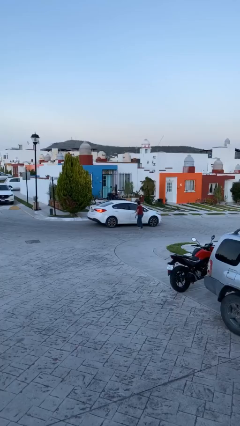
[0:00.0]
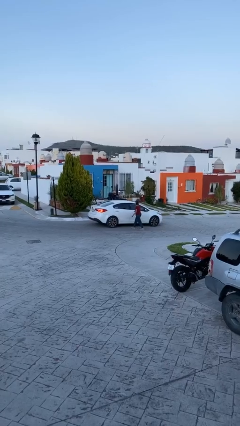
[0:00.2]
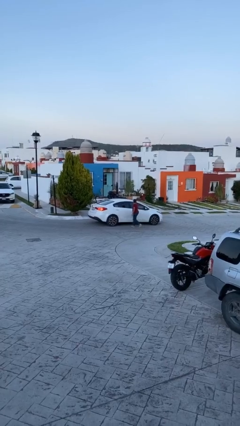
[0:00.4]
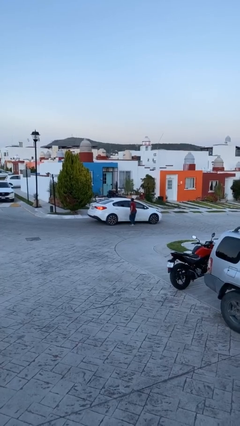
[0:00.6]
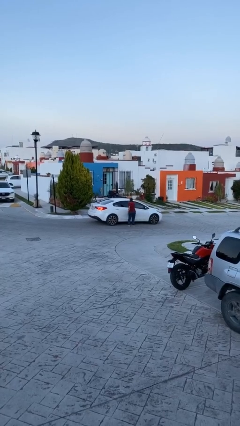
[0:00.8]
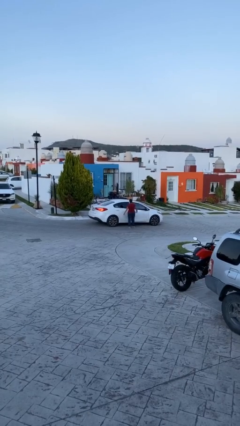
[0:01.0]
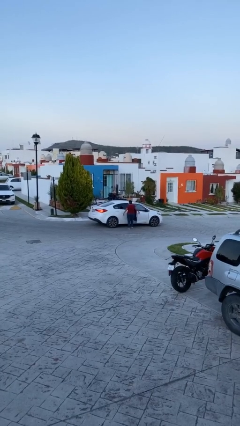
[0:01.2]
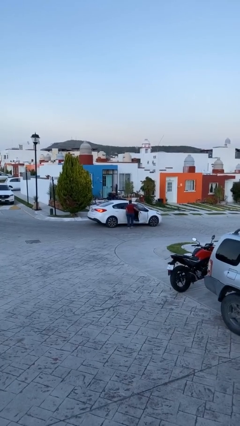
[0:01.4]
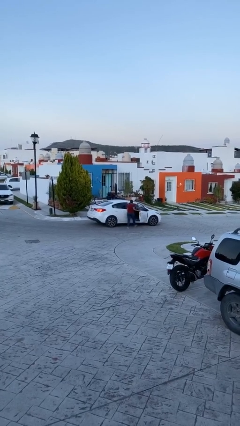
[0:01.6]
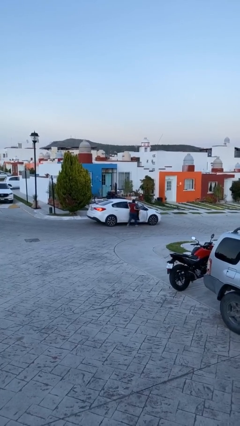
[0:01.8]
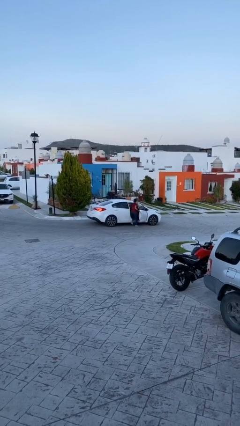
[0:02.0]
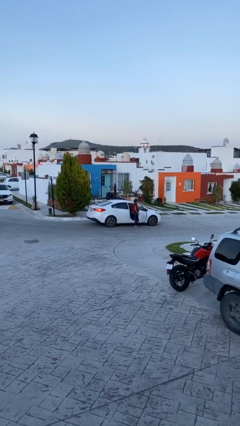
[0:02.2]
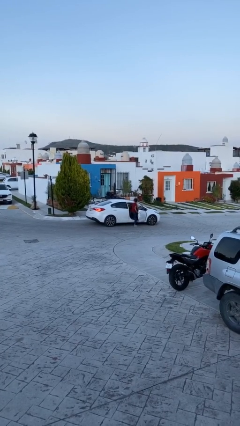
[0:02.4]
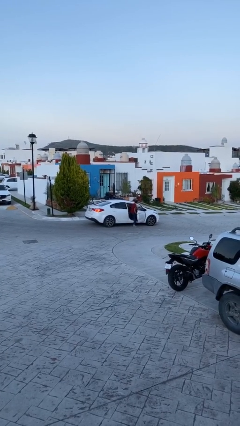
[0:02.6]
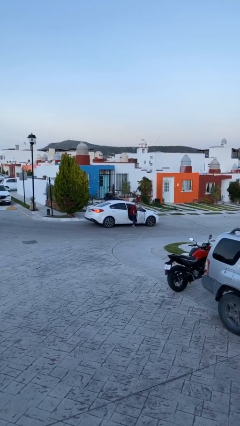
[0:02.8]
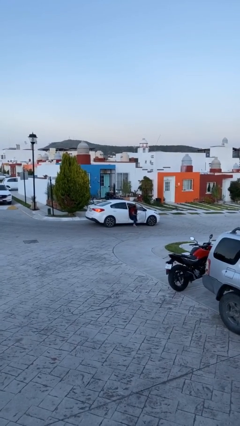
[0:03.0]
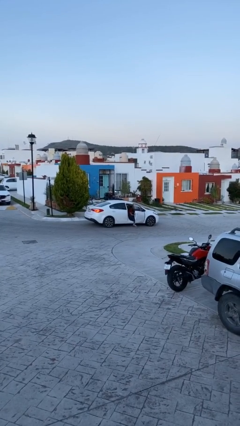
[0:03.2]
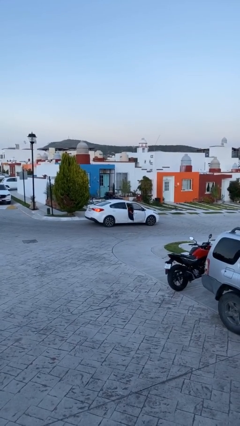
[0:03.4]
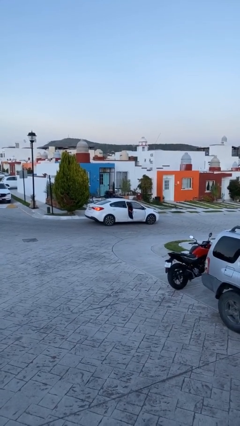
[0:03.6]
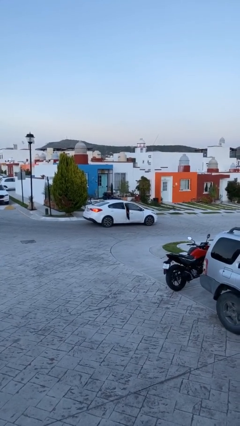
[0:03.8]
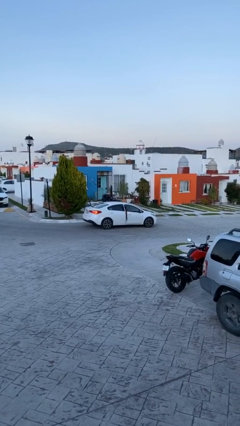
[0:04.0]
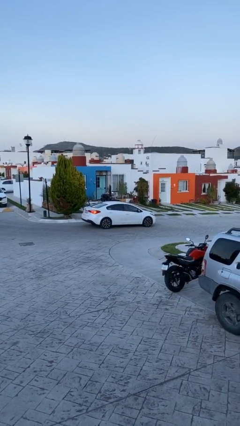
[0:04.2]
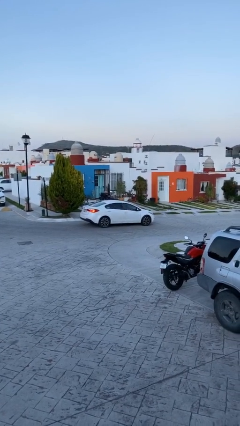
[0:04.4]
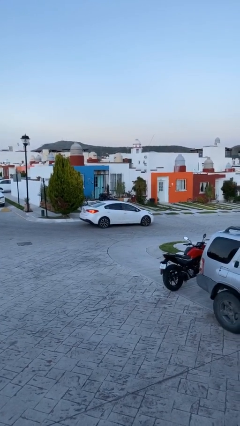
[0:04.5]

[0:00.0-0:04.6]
car picks up person

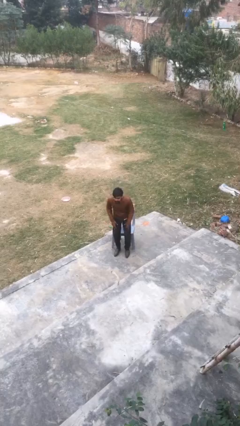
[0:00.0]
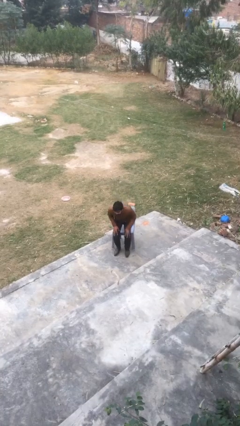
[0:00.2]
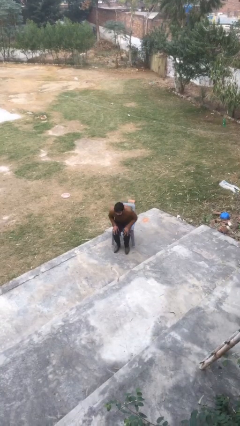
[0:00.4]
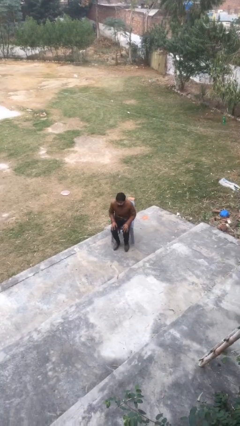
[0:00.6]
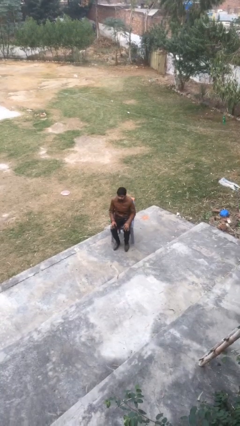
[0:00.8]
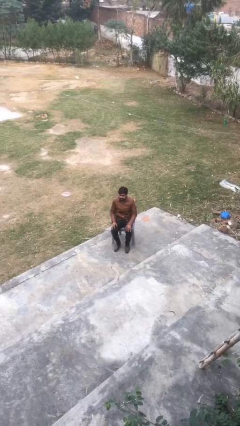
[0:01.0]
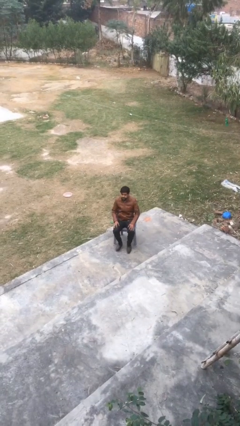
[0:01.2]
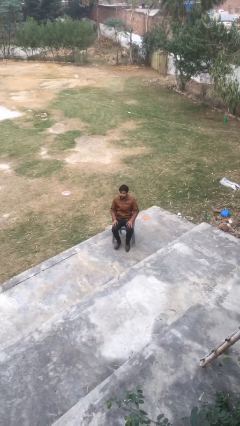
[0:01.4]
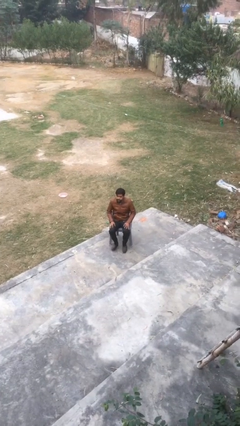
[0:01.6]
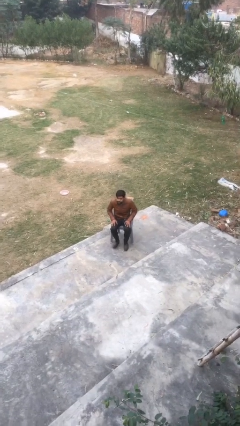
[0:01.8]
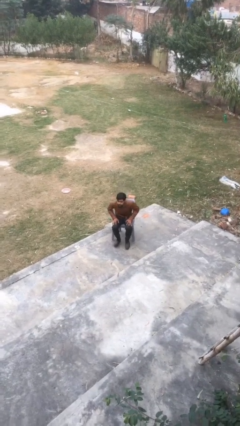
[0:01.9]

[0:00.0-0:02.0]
person sits down

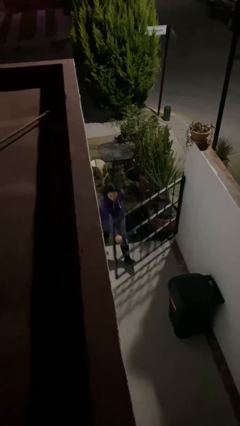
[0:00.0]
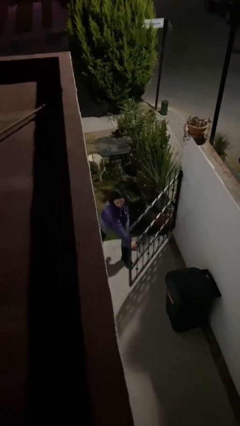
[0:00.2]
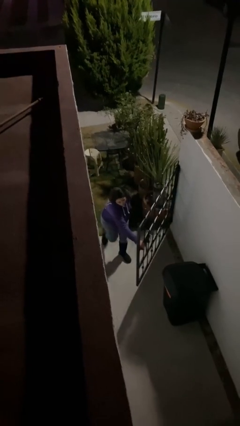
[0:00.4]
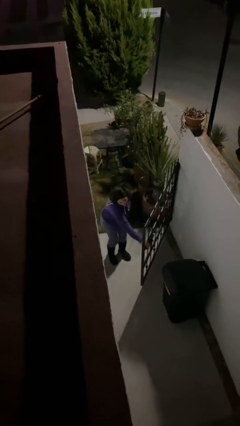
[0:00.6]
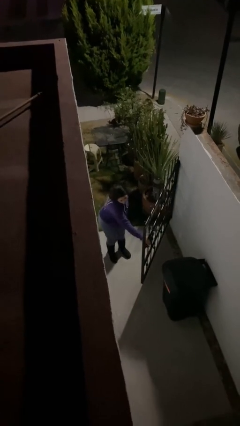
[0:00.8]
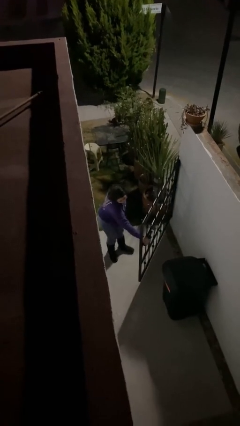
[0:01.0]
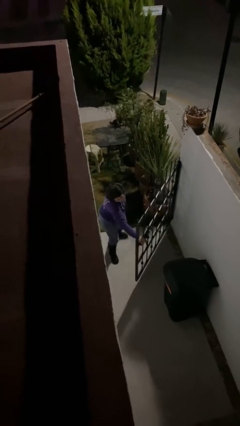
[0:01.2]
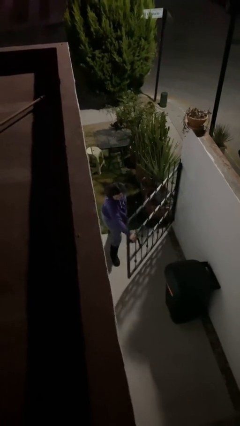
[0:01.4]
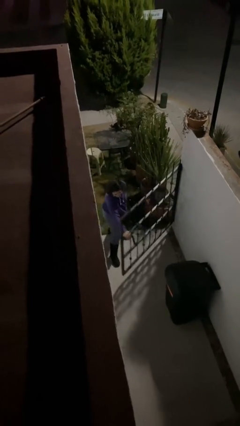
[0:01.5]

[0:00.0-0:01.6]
person opens facility door

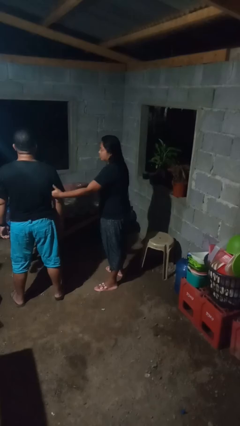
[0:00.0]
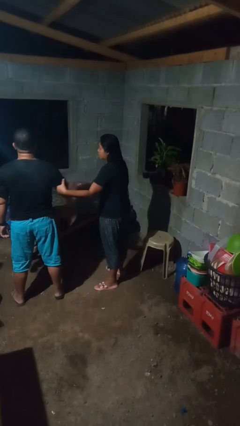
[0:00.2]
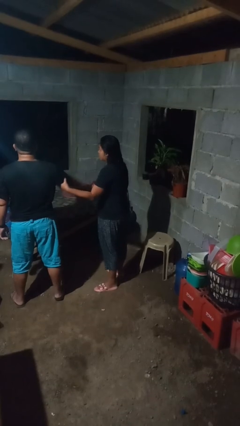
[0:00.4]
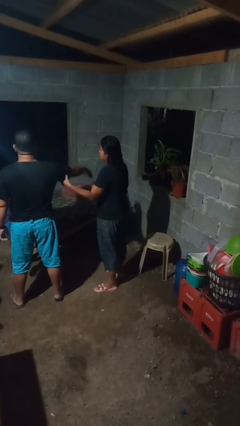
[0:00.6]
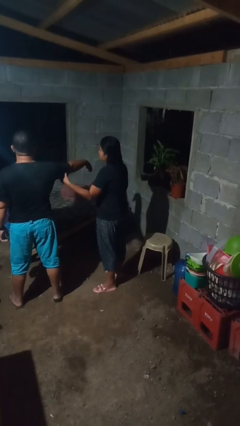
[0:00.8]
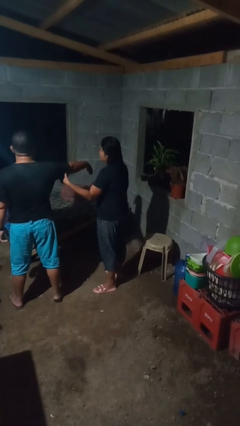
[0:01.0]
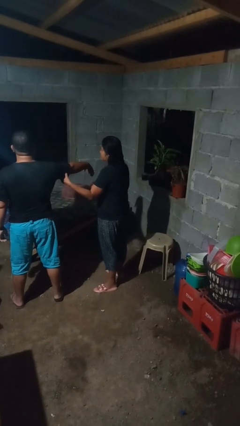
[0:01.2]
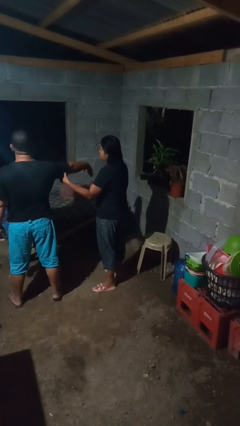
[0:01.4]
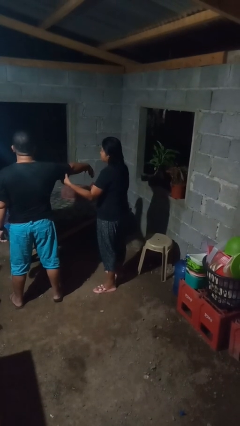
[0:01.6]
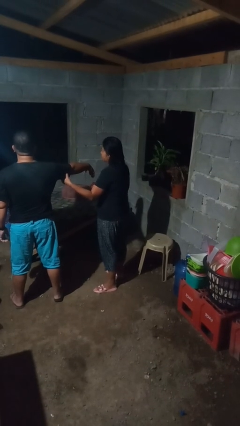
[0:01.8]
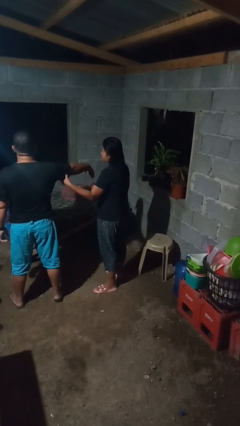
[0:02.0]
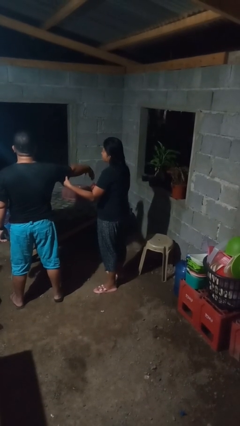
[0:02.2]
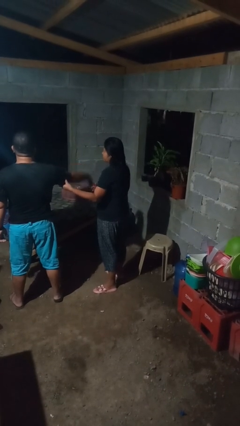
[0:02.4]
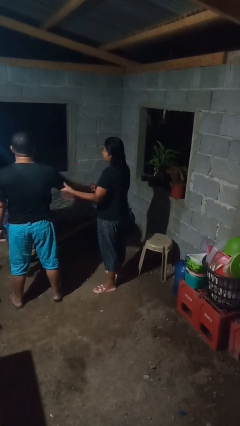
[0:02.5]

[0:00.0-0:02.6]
person grabs person by bicep

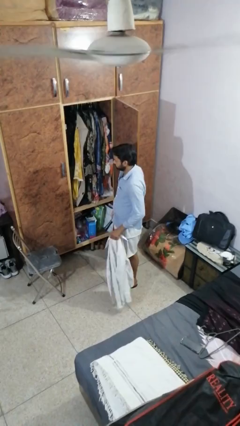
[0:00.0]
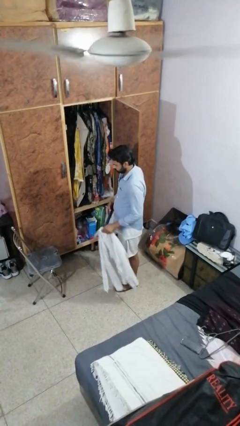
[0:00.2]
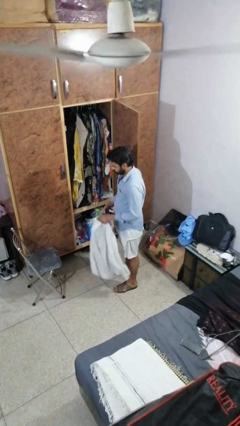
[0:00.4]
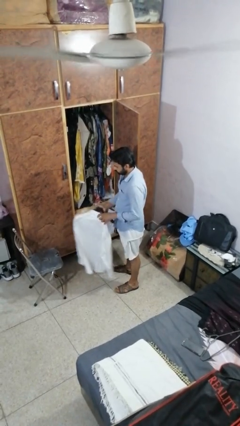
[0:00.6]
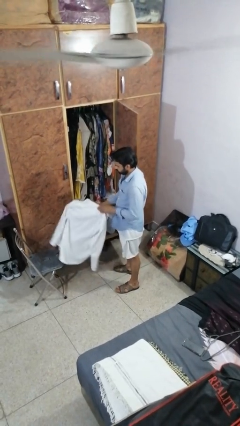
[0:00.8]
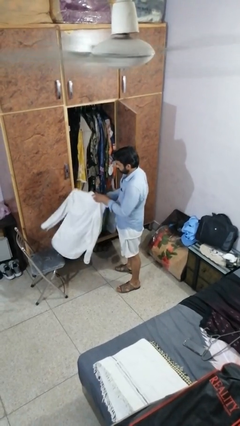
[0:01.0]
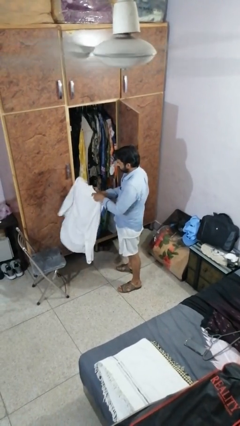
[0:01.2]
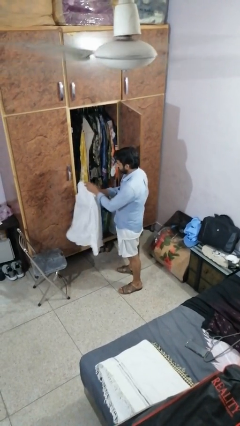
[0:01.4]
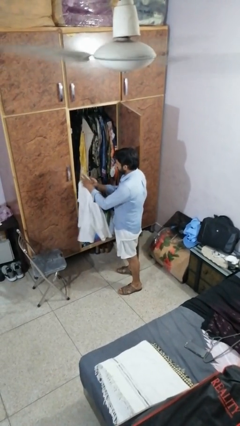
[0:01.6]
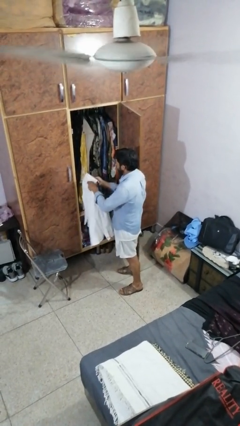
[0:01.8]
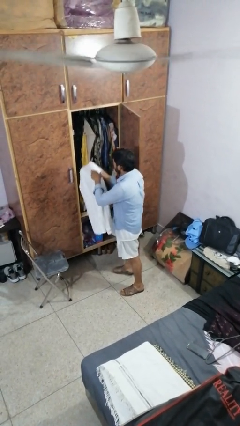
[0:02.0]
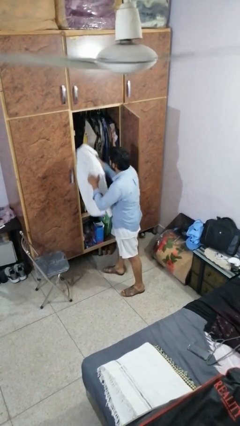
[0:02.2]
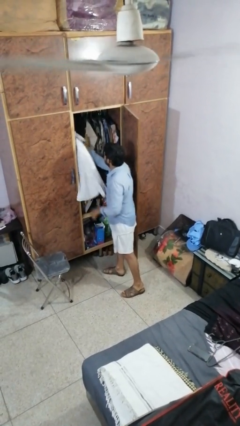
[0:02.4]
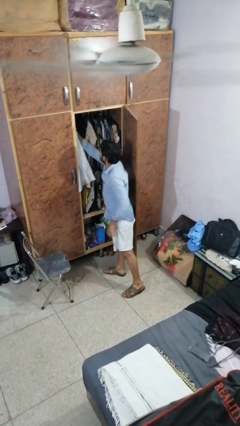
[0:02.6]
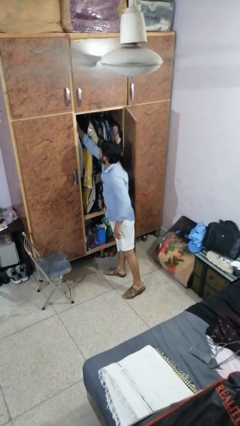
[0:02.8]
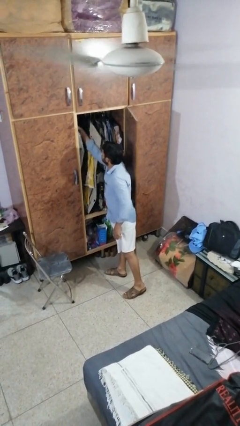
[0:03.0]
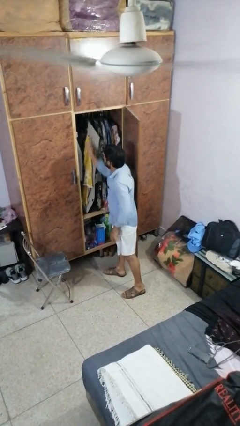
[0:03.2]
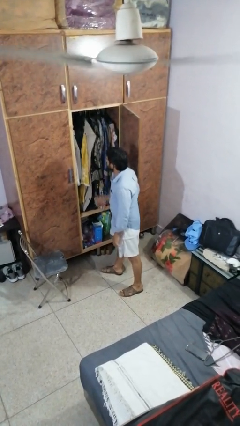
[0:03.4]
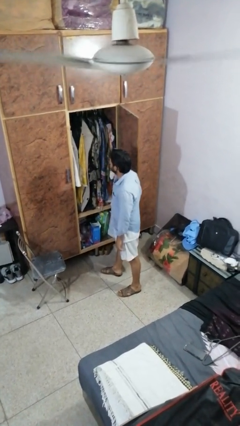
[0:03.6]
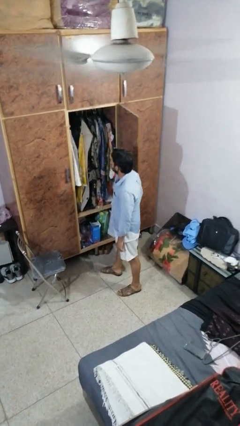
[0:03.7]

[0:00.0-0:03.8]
person puts clothes into closet

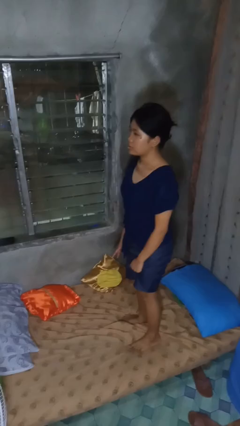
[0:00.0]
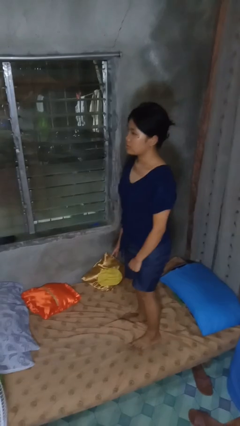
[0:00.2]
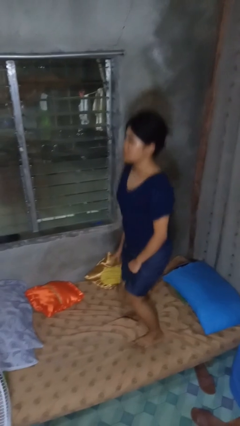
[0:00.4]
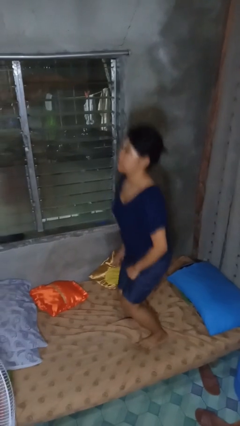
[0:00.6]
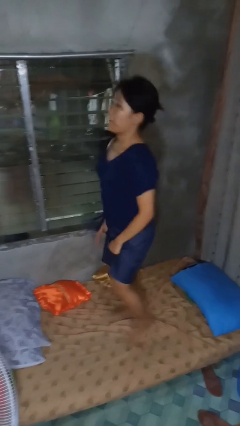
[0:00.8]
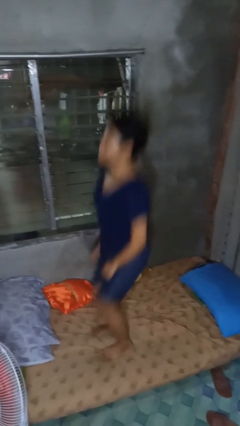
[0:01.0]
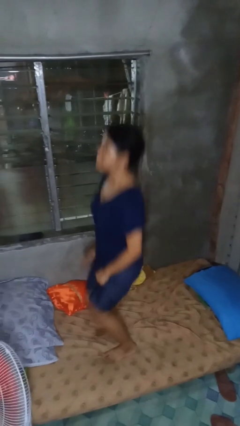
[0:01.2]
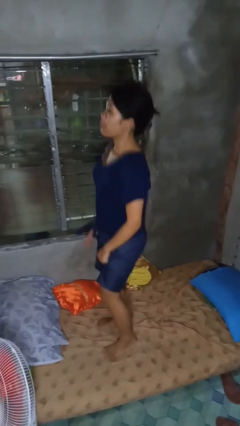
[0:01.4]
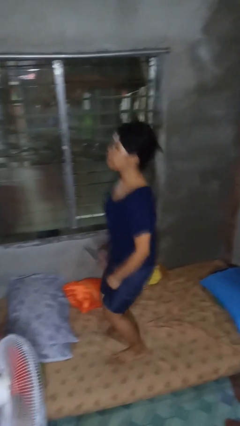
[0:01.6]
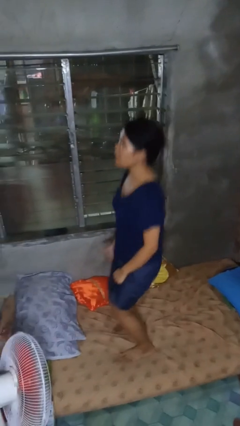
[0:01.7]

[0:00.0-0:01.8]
person jumps on bed

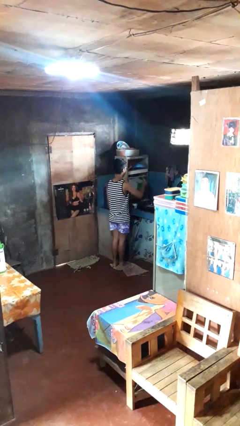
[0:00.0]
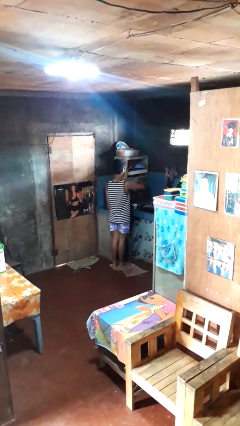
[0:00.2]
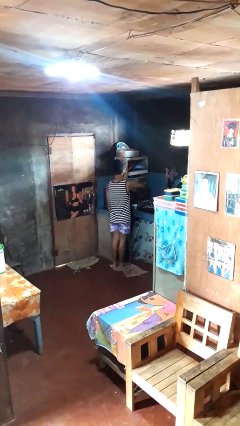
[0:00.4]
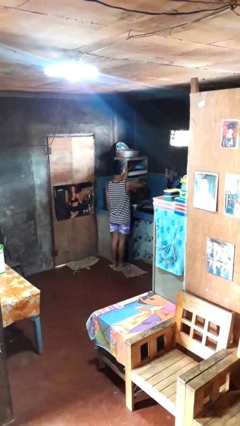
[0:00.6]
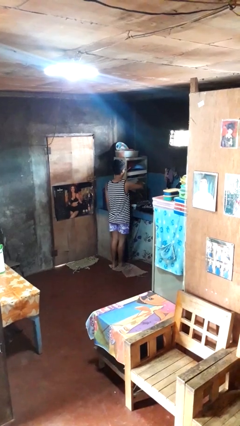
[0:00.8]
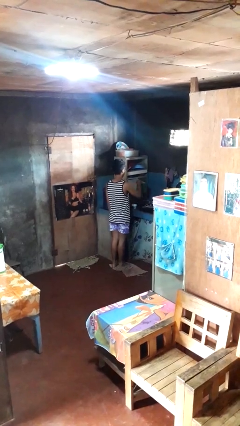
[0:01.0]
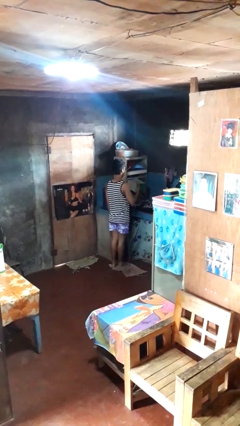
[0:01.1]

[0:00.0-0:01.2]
person puts object into kitchen drawer
